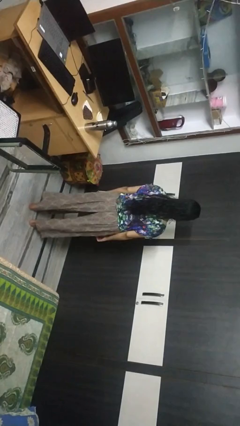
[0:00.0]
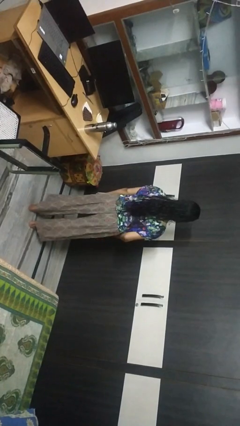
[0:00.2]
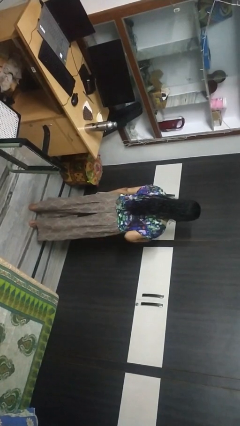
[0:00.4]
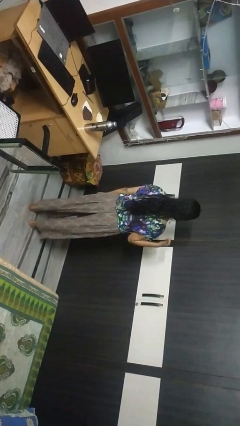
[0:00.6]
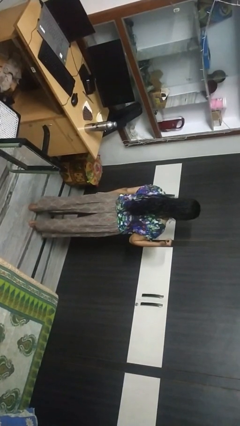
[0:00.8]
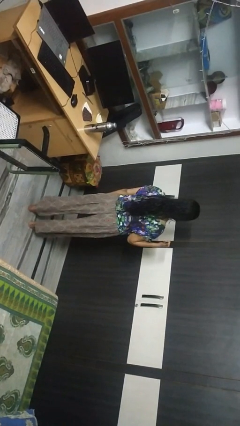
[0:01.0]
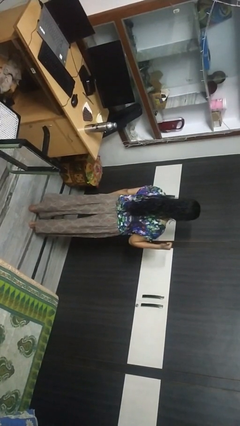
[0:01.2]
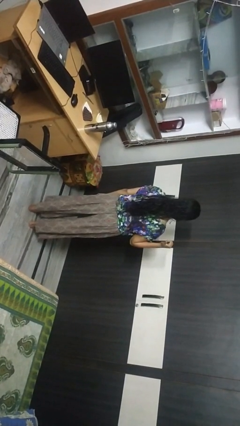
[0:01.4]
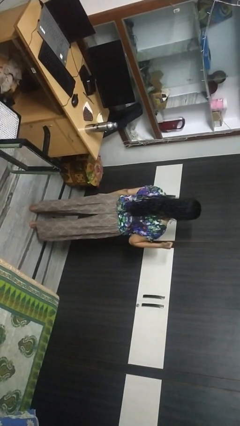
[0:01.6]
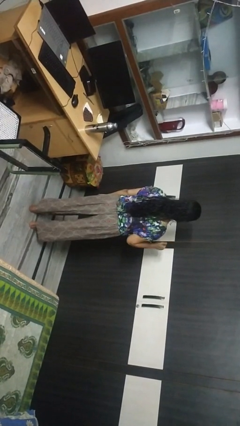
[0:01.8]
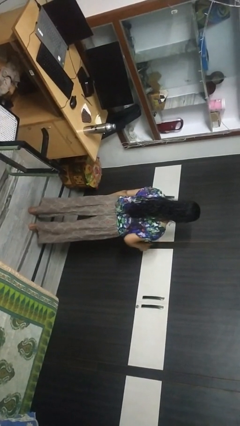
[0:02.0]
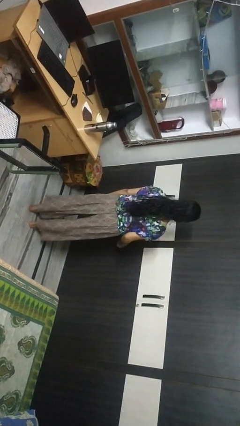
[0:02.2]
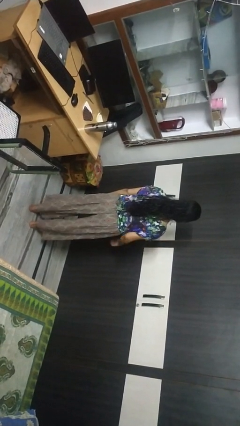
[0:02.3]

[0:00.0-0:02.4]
person gestures behind me

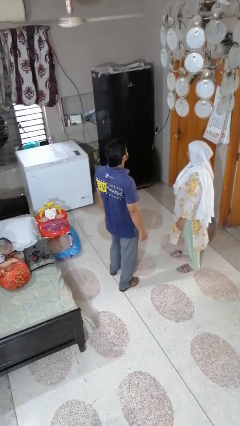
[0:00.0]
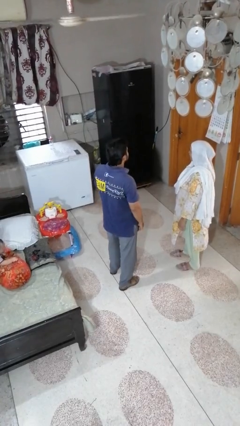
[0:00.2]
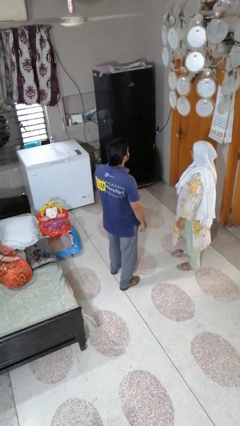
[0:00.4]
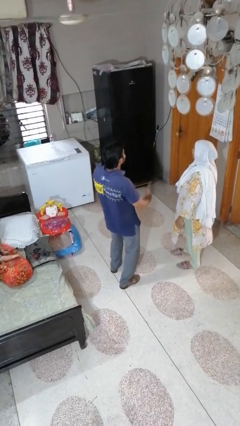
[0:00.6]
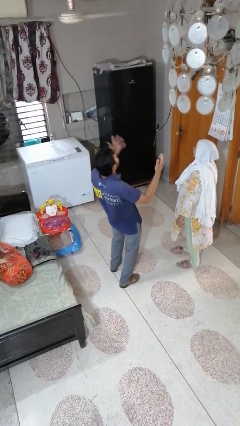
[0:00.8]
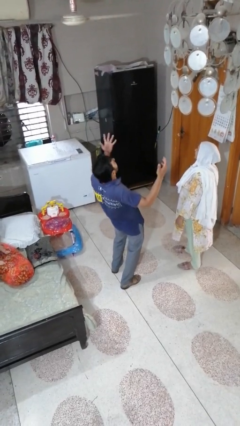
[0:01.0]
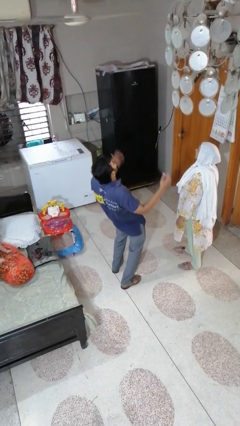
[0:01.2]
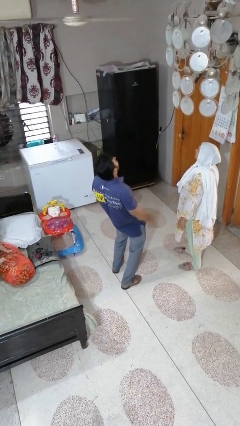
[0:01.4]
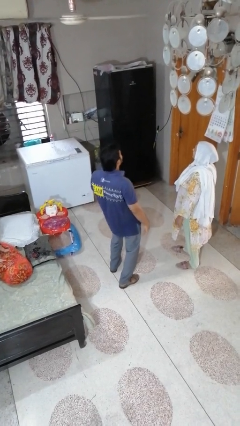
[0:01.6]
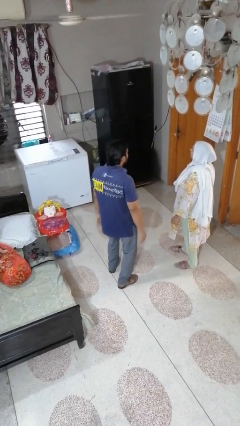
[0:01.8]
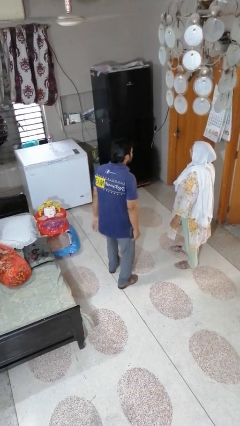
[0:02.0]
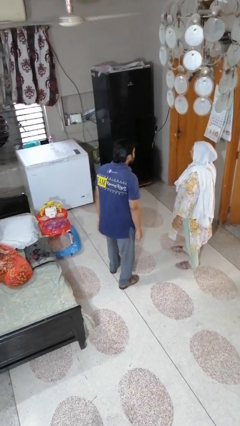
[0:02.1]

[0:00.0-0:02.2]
person laughs with person

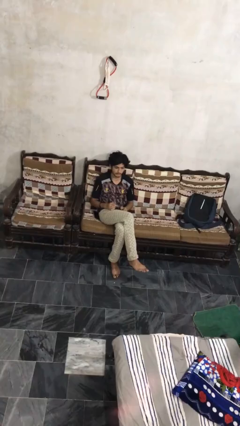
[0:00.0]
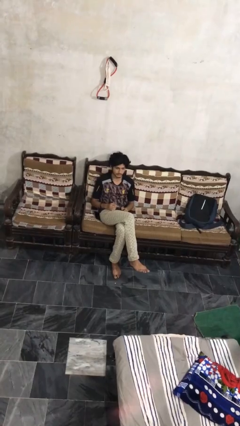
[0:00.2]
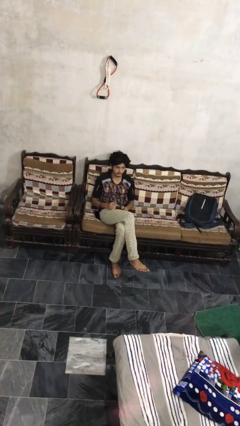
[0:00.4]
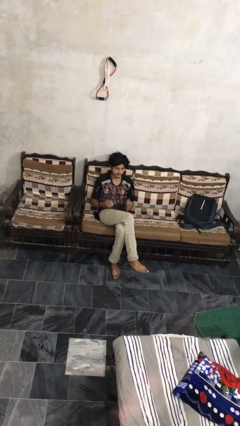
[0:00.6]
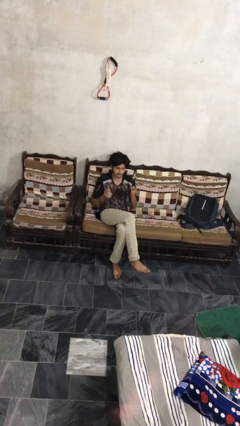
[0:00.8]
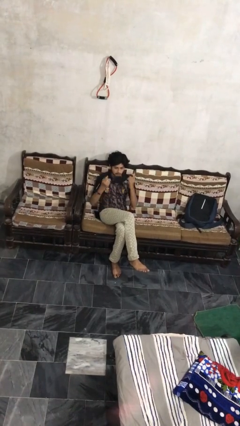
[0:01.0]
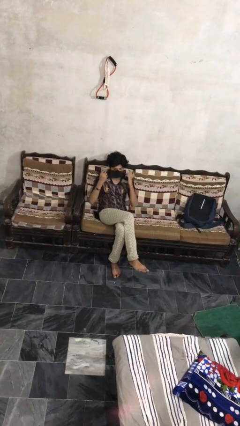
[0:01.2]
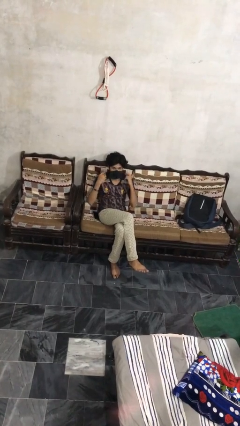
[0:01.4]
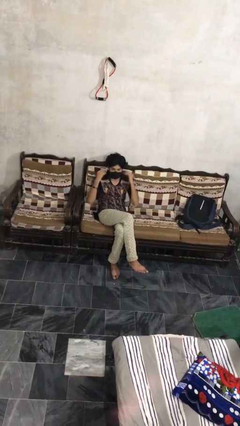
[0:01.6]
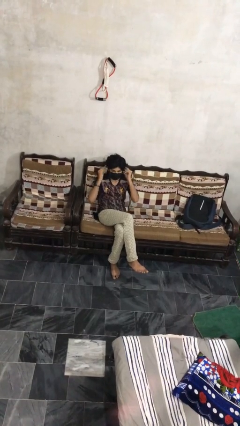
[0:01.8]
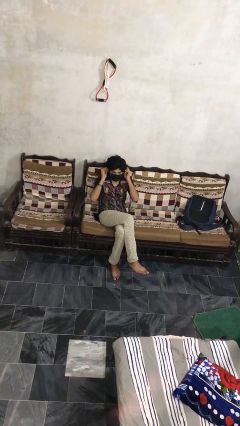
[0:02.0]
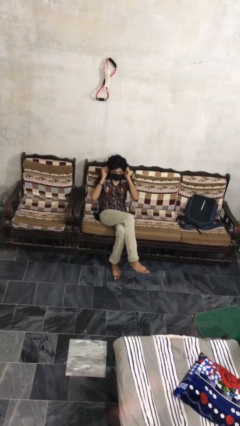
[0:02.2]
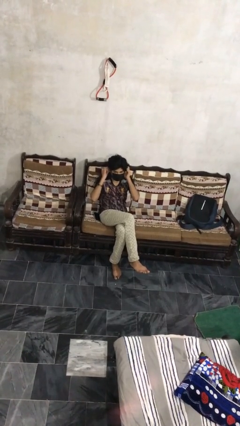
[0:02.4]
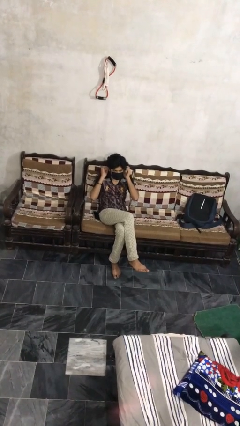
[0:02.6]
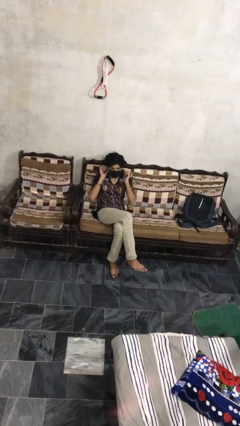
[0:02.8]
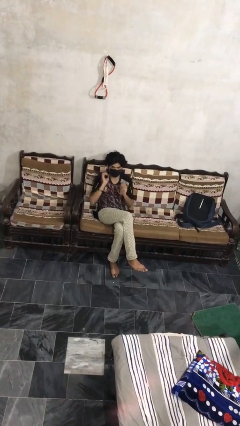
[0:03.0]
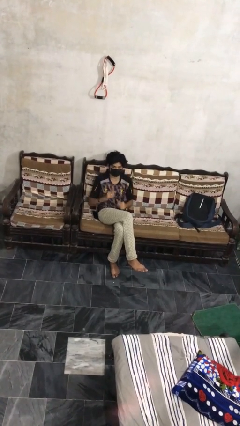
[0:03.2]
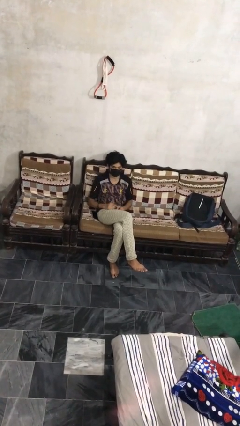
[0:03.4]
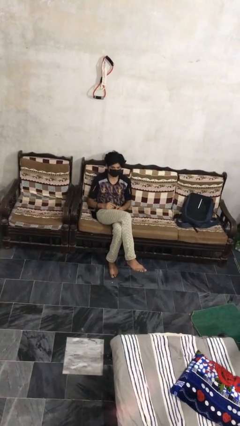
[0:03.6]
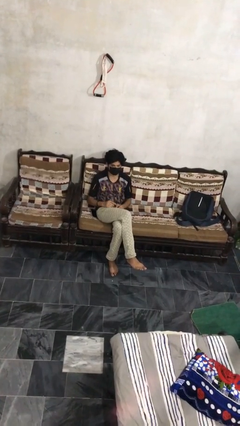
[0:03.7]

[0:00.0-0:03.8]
person puts on facemask

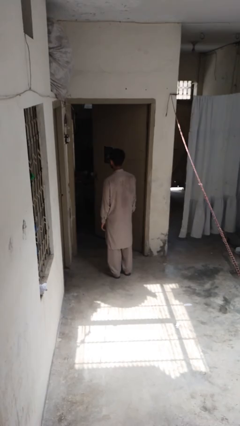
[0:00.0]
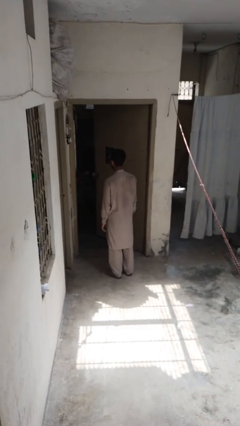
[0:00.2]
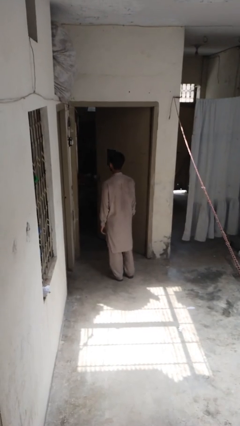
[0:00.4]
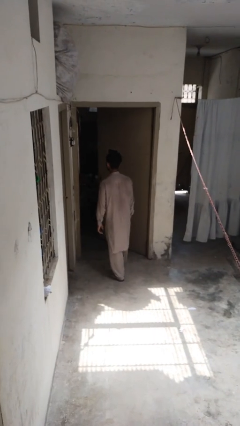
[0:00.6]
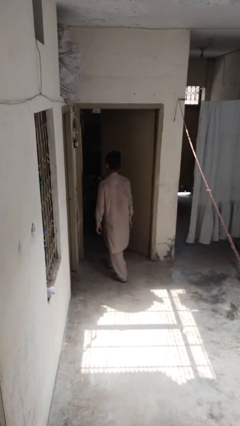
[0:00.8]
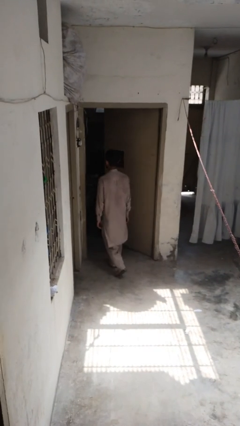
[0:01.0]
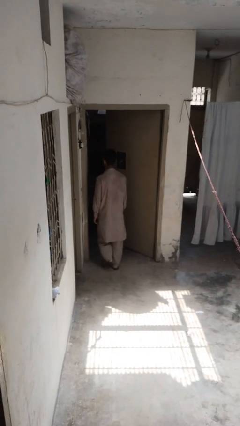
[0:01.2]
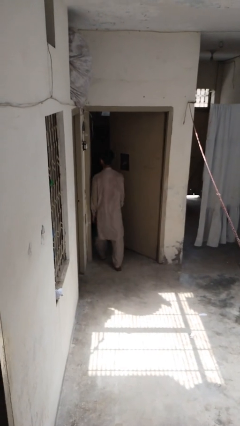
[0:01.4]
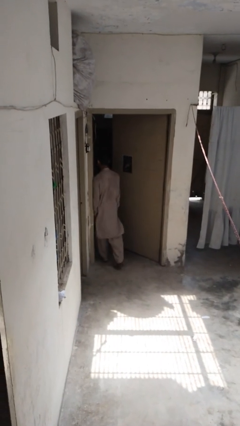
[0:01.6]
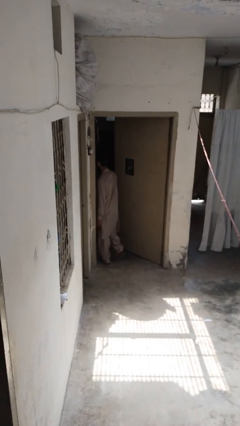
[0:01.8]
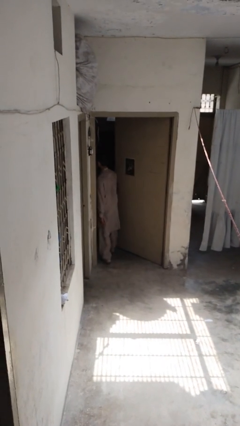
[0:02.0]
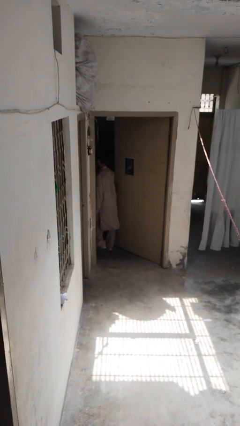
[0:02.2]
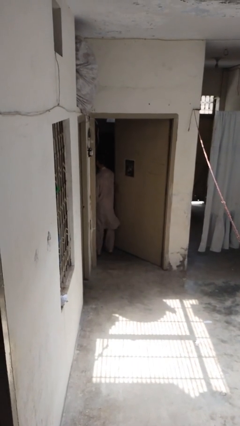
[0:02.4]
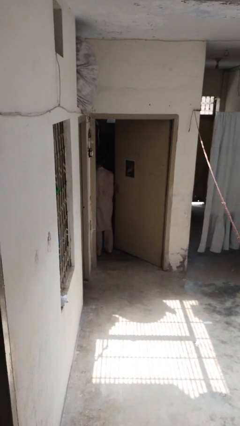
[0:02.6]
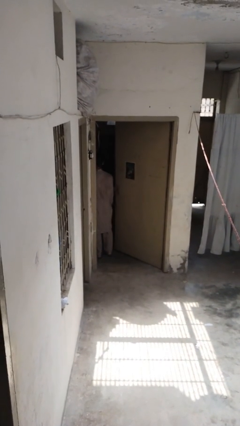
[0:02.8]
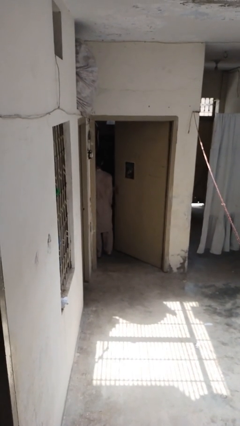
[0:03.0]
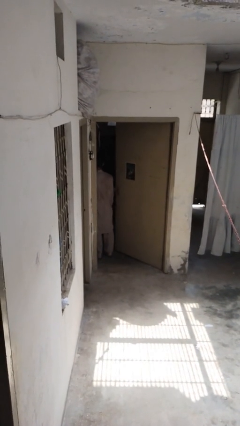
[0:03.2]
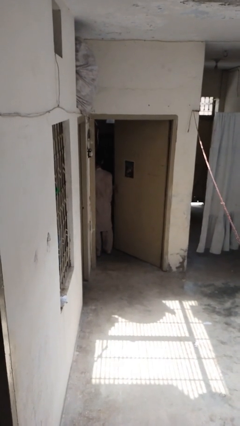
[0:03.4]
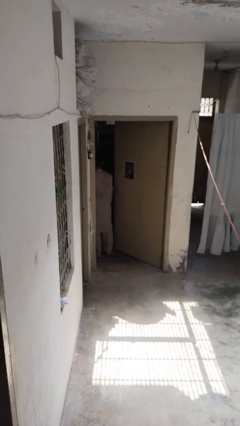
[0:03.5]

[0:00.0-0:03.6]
person bumps into wall

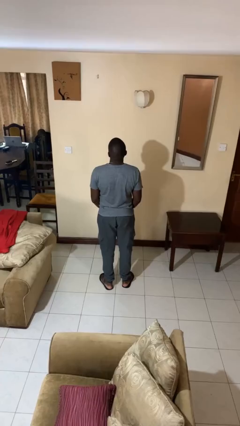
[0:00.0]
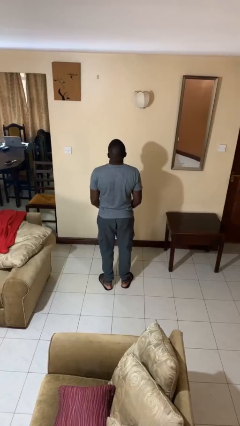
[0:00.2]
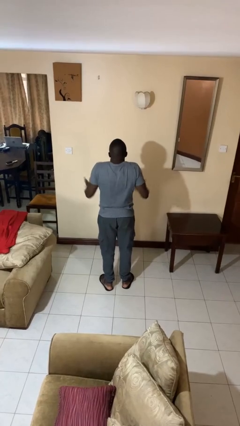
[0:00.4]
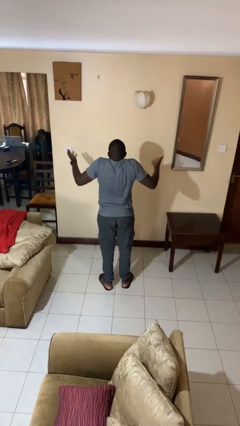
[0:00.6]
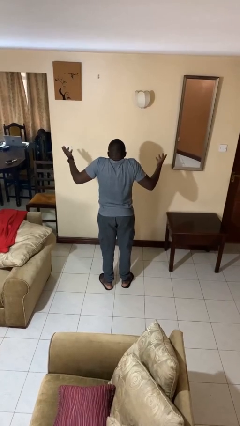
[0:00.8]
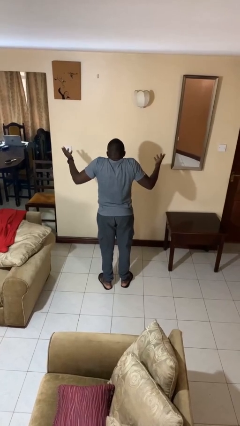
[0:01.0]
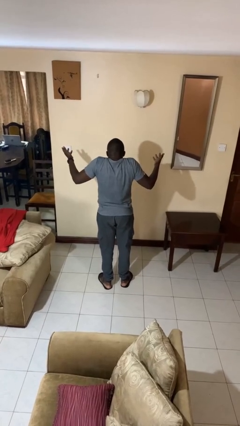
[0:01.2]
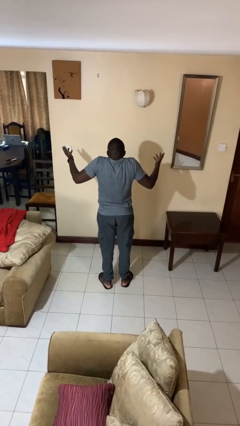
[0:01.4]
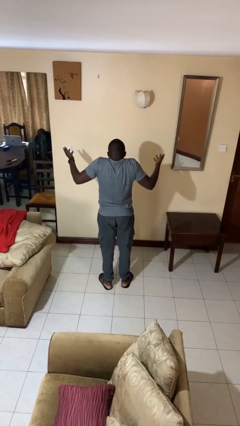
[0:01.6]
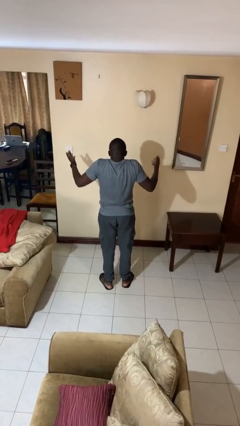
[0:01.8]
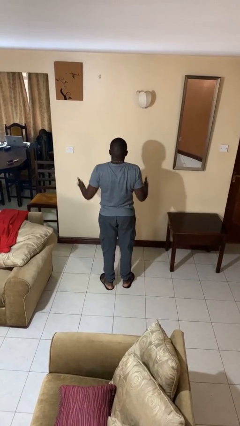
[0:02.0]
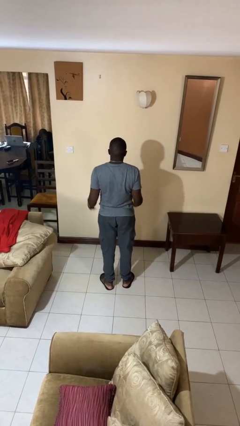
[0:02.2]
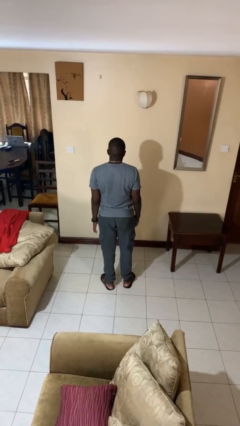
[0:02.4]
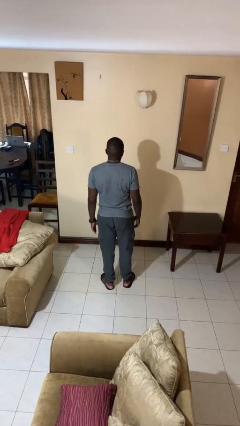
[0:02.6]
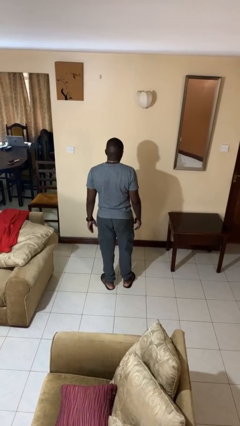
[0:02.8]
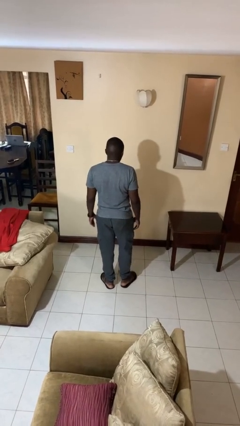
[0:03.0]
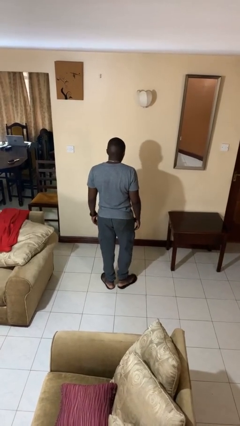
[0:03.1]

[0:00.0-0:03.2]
person shrugs

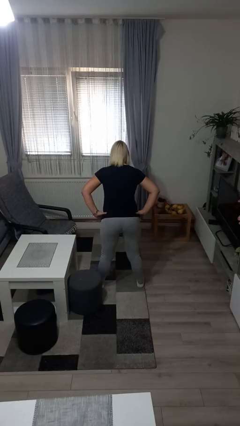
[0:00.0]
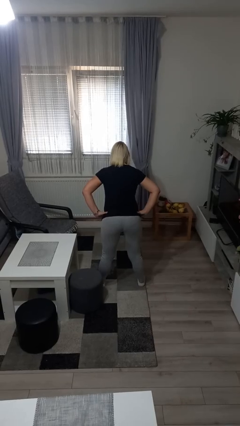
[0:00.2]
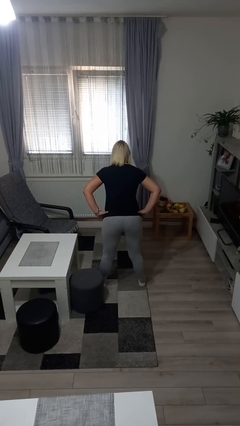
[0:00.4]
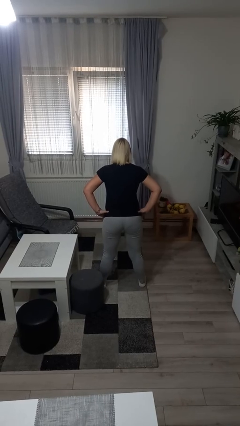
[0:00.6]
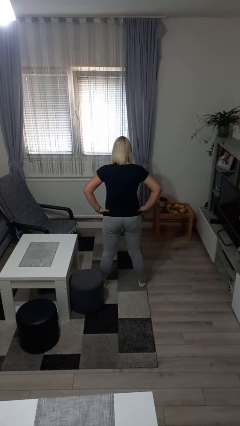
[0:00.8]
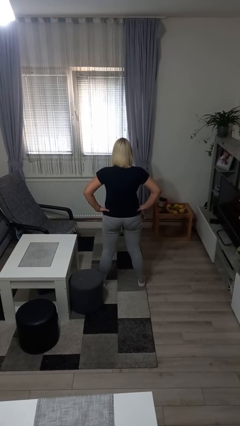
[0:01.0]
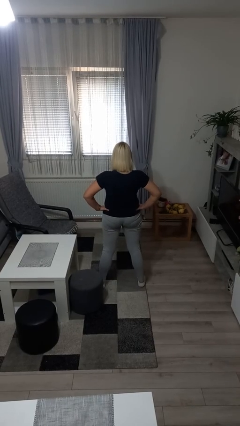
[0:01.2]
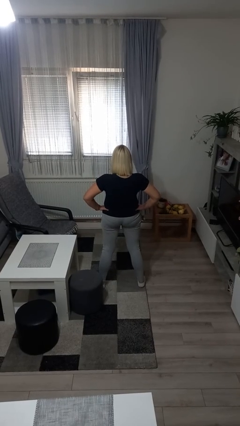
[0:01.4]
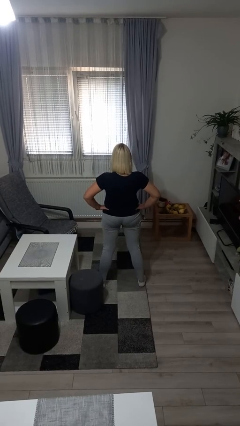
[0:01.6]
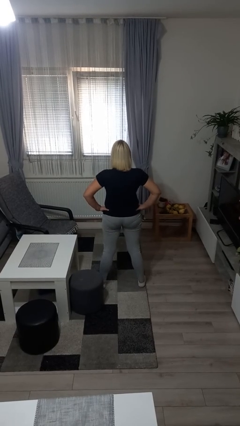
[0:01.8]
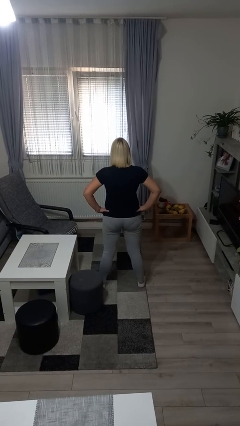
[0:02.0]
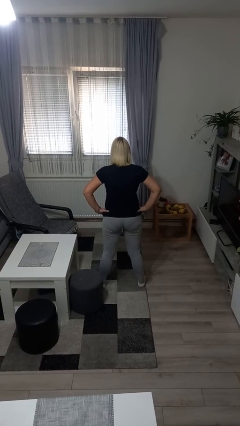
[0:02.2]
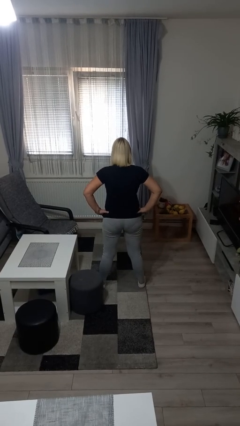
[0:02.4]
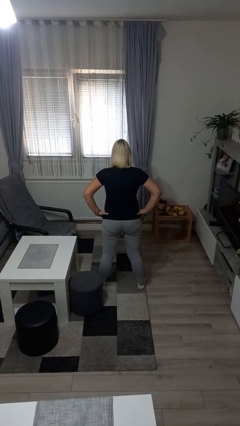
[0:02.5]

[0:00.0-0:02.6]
person wiggles hips
